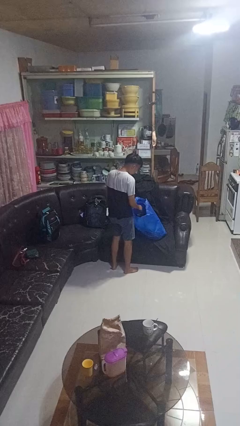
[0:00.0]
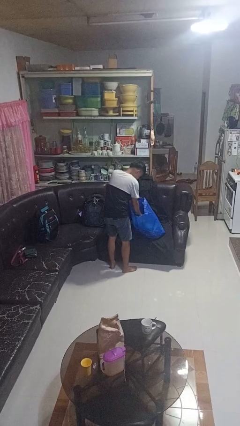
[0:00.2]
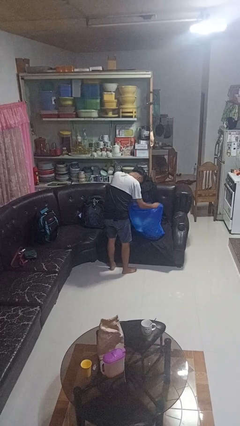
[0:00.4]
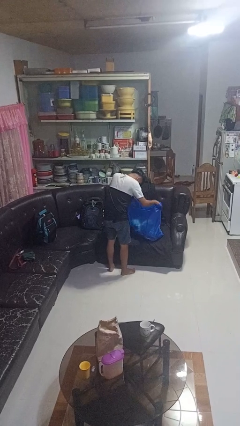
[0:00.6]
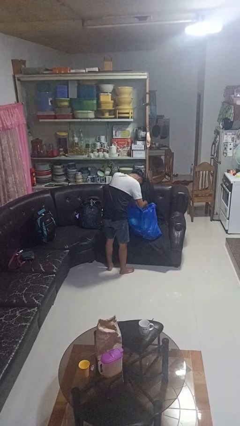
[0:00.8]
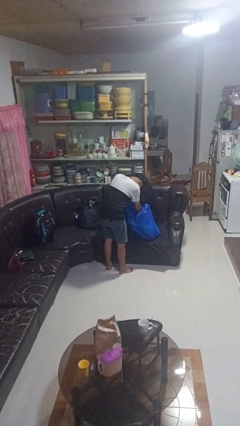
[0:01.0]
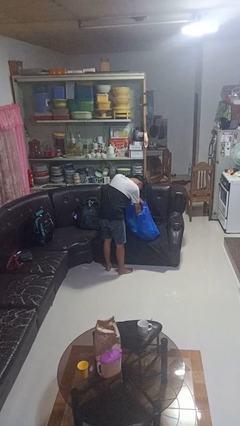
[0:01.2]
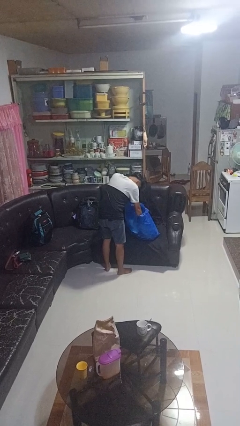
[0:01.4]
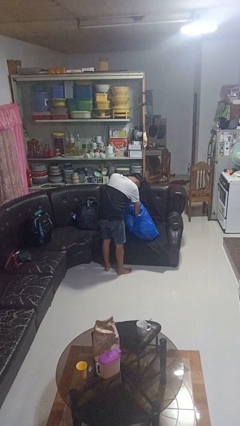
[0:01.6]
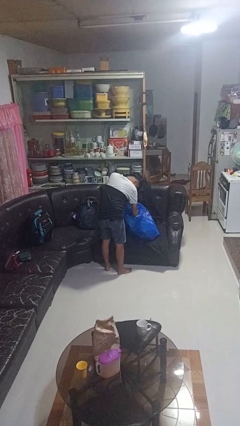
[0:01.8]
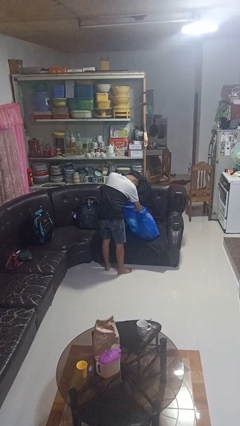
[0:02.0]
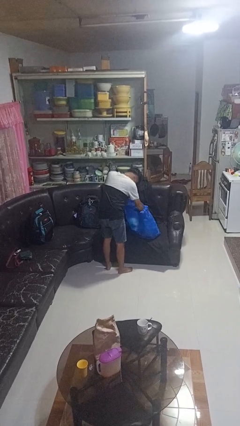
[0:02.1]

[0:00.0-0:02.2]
person searches in bag

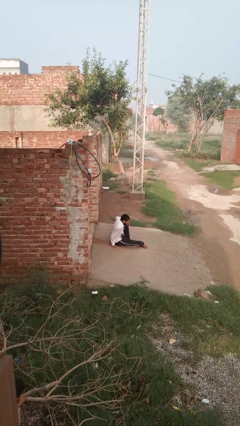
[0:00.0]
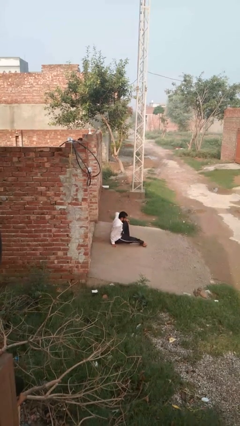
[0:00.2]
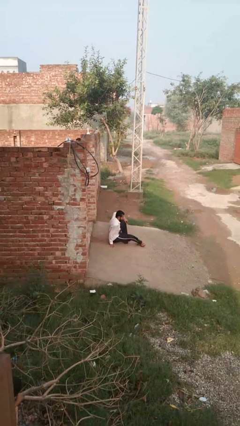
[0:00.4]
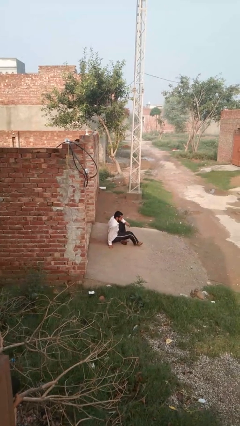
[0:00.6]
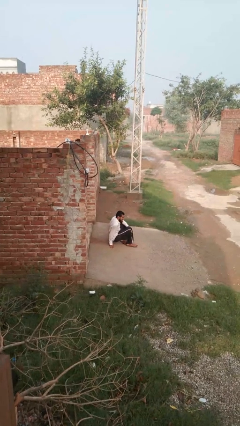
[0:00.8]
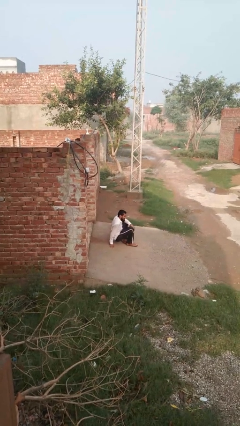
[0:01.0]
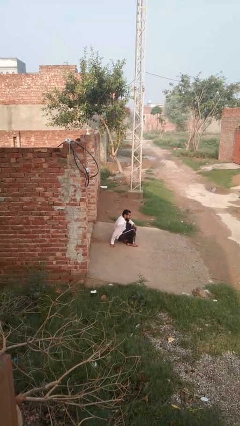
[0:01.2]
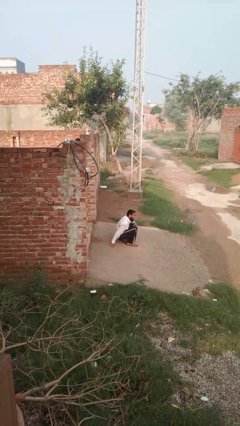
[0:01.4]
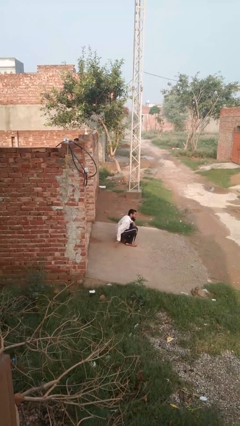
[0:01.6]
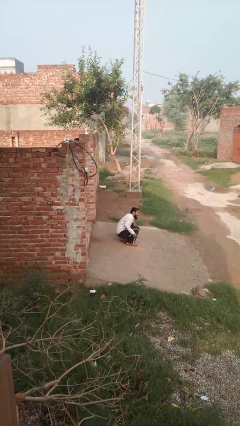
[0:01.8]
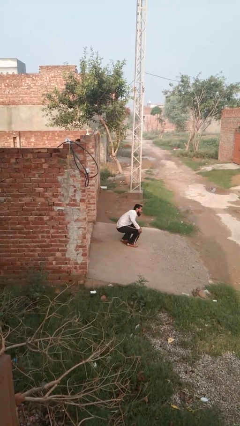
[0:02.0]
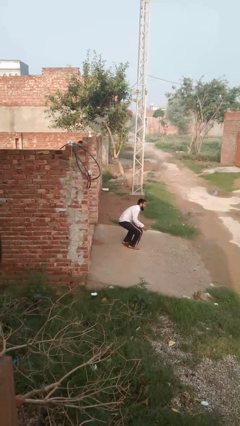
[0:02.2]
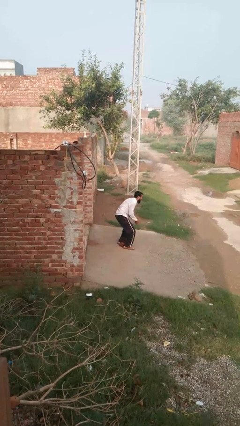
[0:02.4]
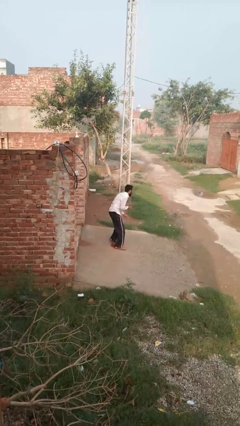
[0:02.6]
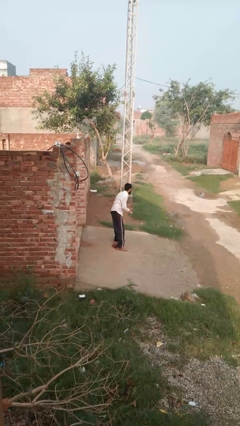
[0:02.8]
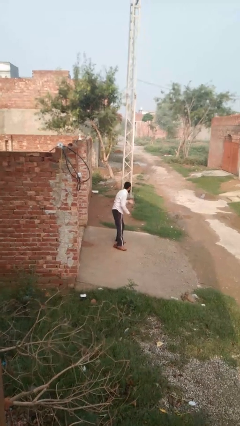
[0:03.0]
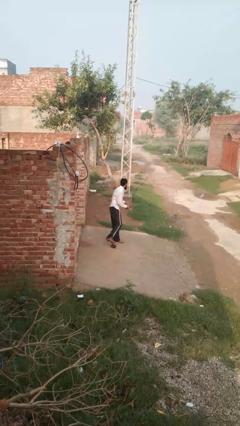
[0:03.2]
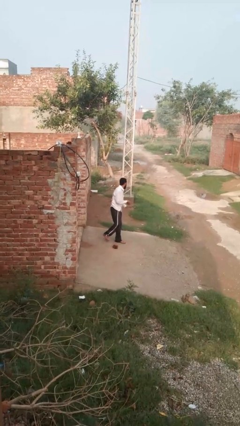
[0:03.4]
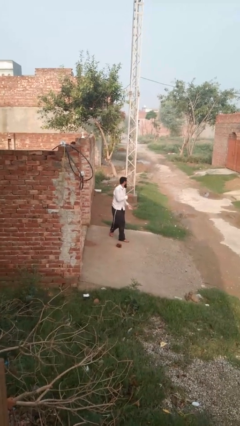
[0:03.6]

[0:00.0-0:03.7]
person stands up from floor

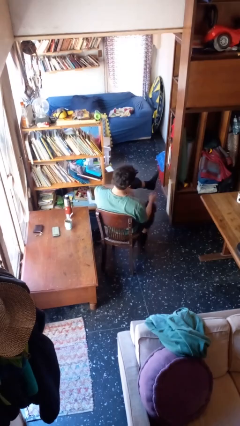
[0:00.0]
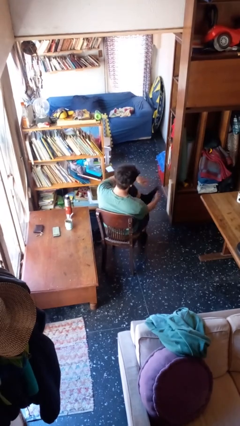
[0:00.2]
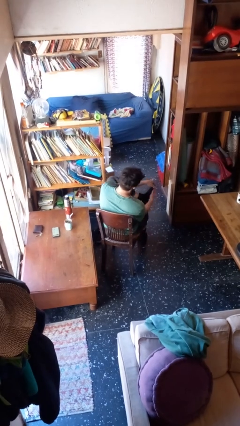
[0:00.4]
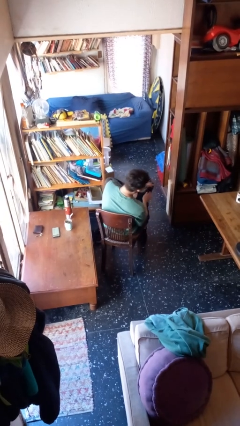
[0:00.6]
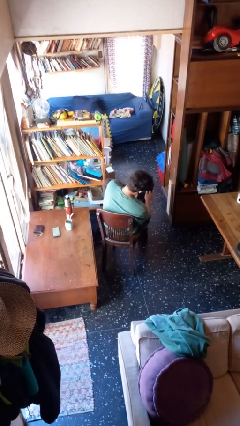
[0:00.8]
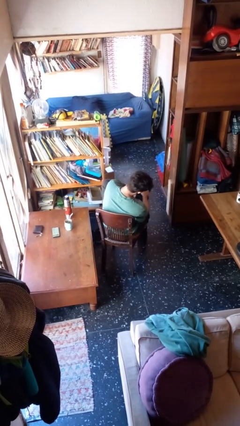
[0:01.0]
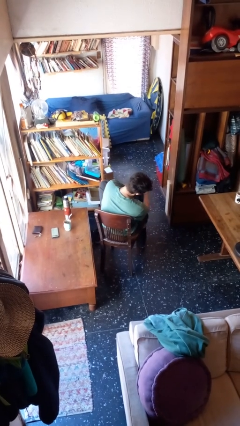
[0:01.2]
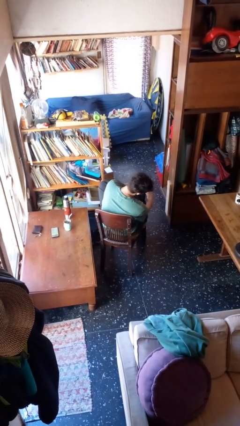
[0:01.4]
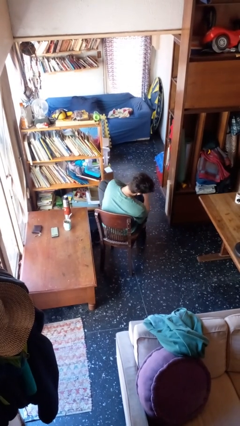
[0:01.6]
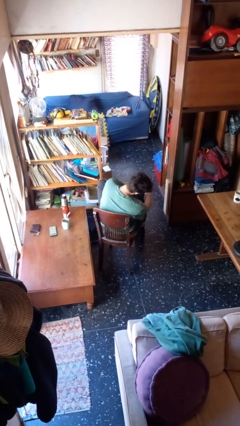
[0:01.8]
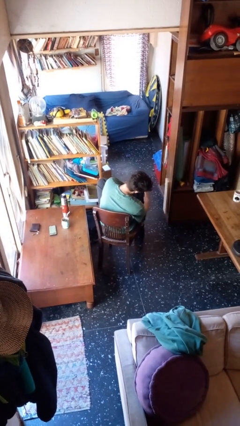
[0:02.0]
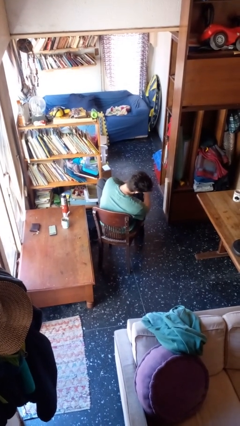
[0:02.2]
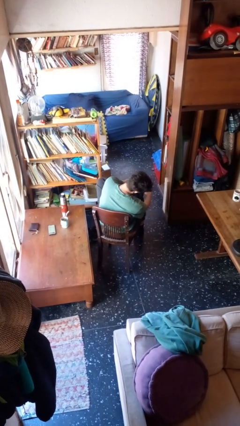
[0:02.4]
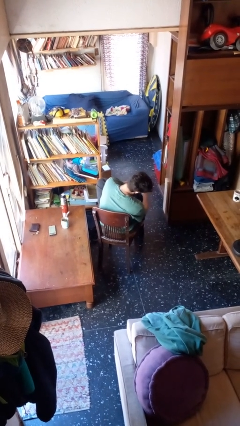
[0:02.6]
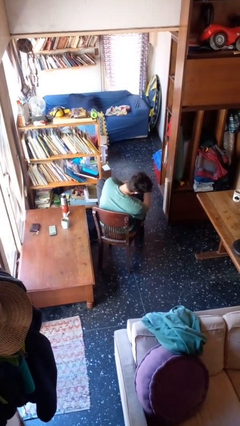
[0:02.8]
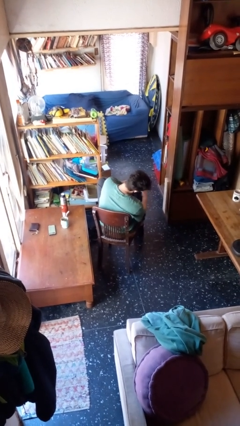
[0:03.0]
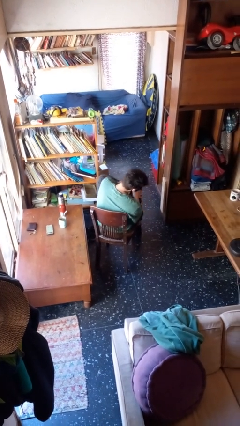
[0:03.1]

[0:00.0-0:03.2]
person rubs foot

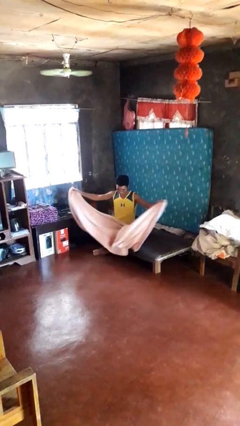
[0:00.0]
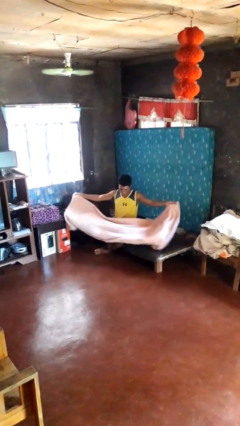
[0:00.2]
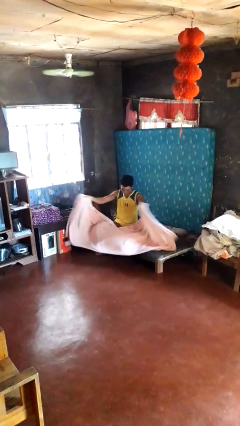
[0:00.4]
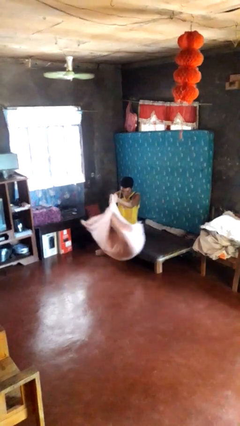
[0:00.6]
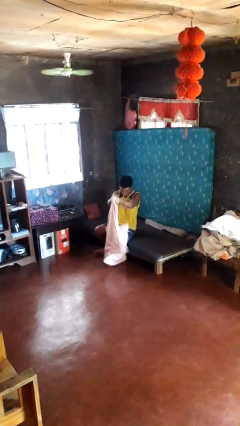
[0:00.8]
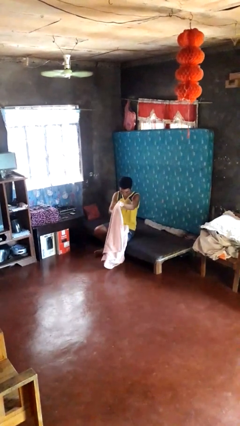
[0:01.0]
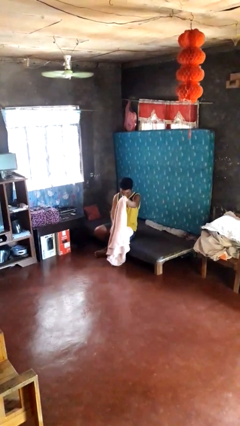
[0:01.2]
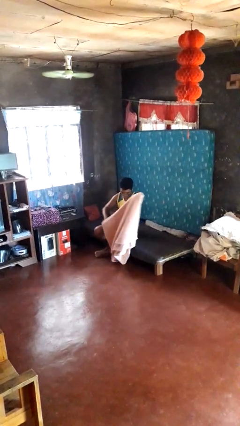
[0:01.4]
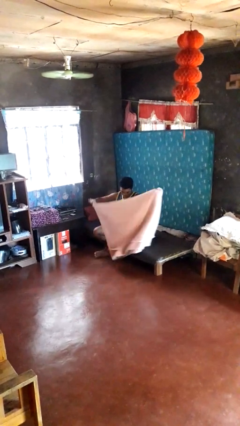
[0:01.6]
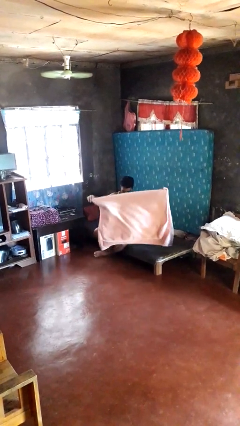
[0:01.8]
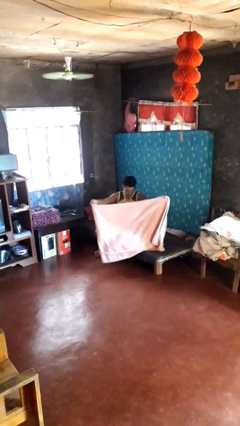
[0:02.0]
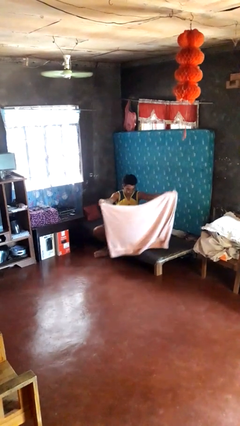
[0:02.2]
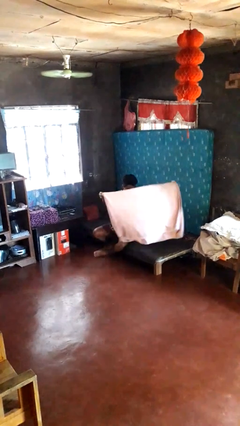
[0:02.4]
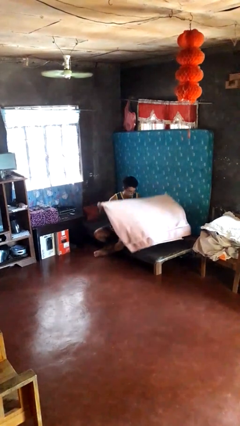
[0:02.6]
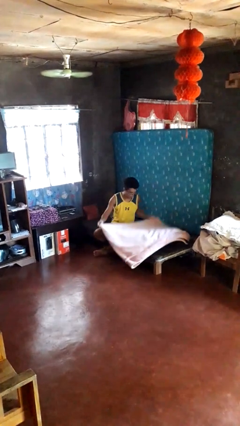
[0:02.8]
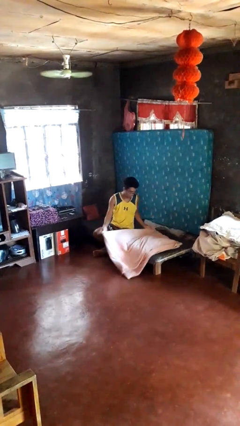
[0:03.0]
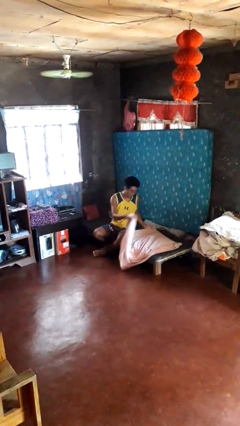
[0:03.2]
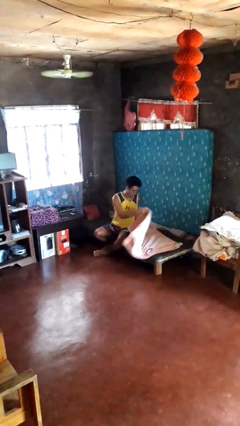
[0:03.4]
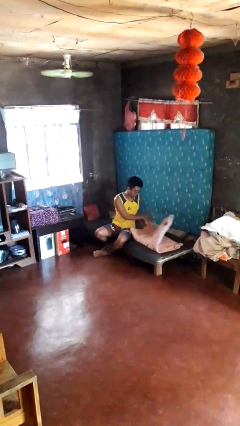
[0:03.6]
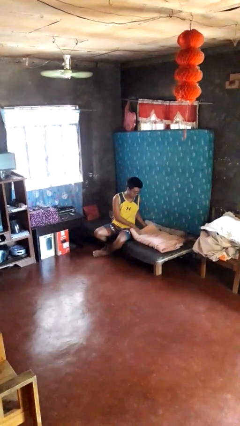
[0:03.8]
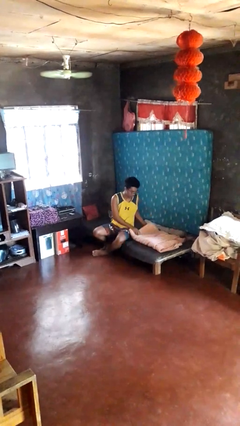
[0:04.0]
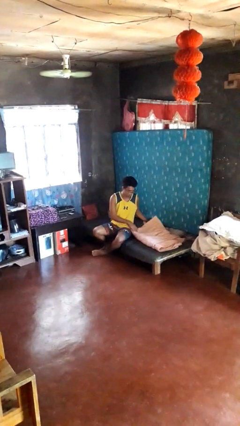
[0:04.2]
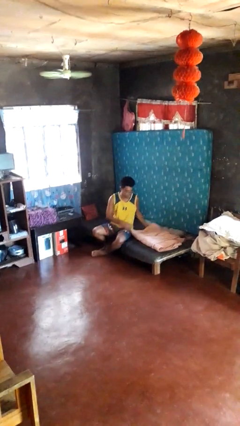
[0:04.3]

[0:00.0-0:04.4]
person folds blanket

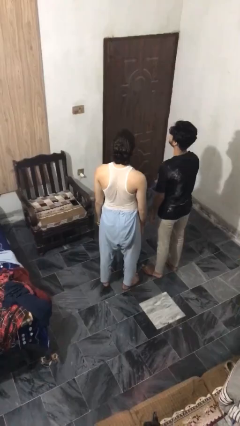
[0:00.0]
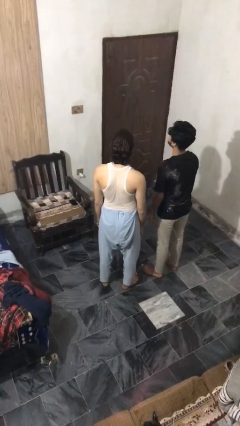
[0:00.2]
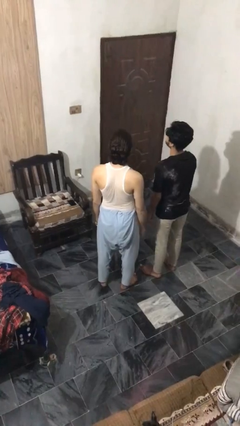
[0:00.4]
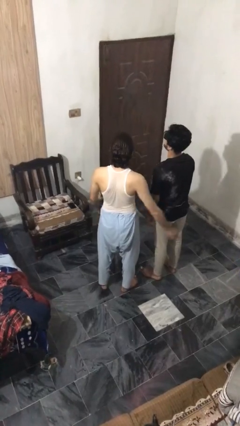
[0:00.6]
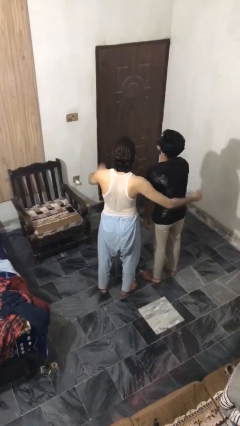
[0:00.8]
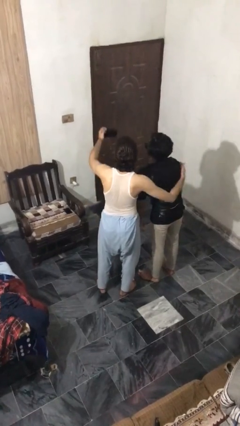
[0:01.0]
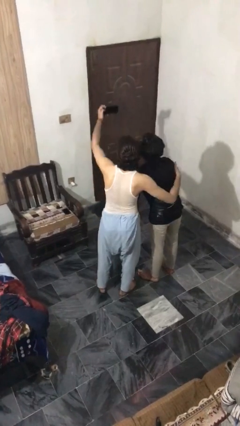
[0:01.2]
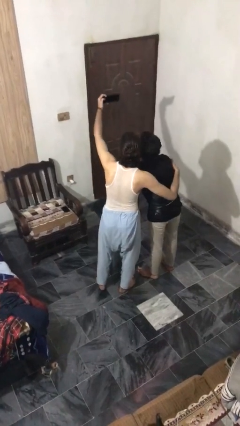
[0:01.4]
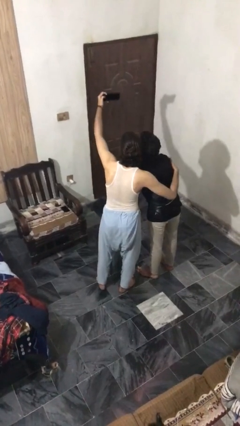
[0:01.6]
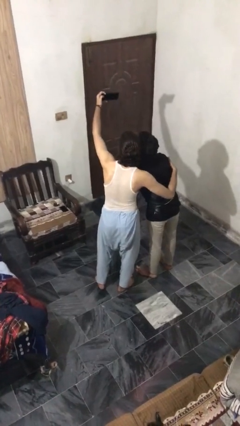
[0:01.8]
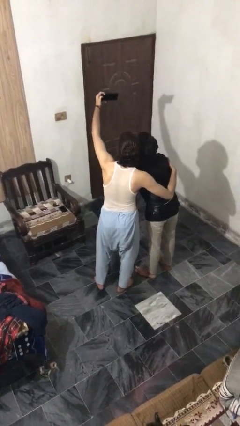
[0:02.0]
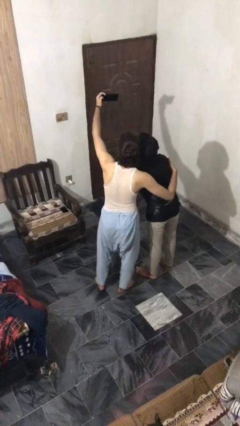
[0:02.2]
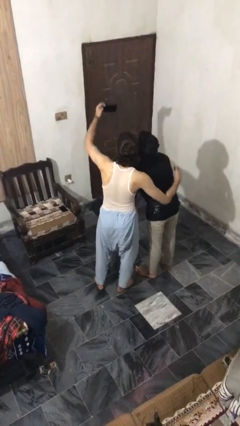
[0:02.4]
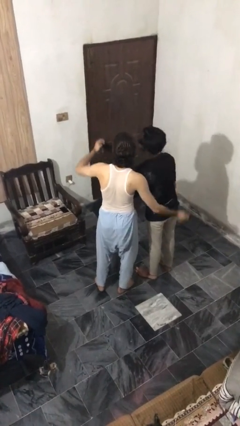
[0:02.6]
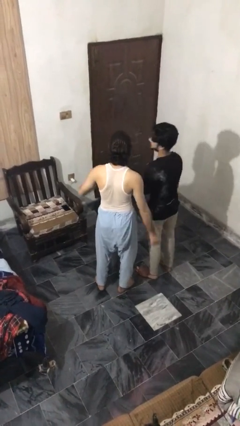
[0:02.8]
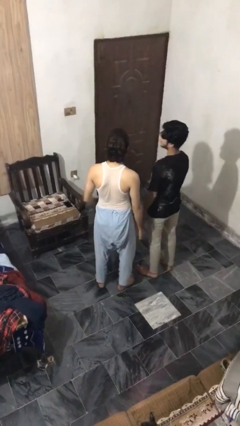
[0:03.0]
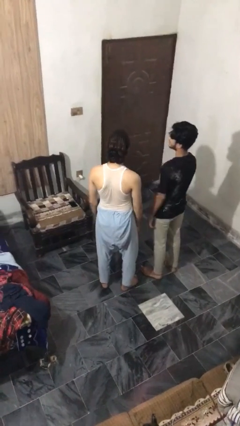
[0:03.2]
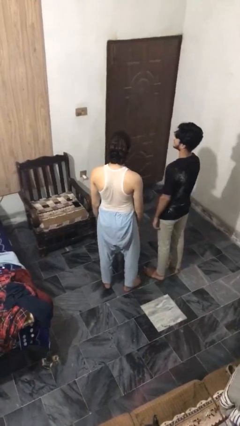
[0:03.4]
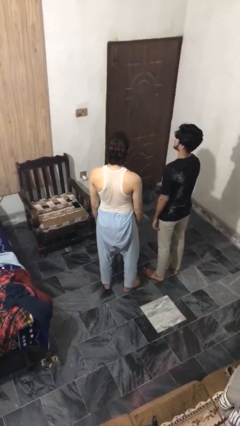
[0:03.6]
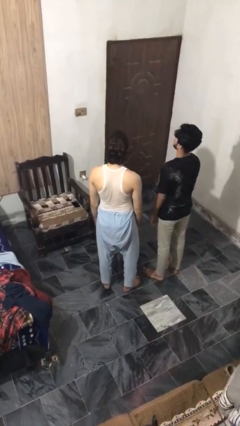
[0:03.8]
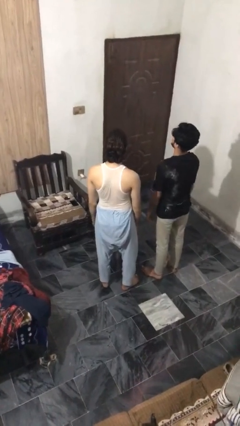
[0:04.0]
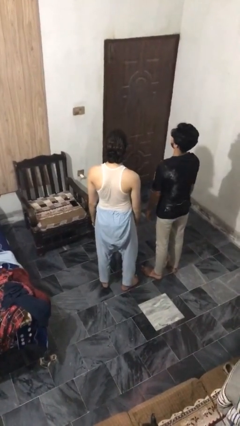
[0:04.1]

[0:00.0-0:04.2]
person takes selfie with person
